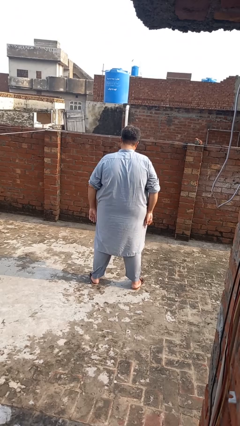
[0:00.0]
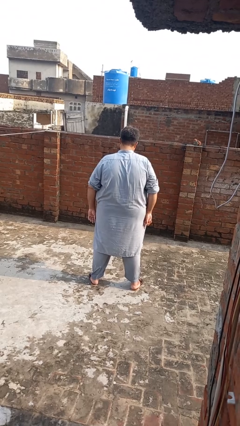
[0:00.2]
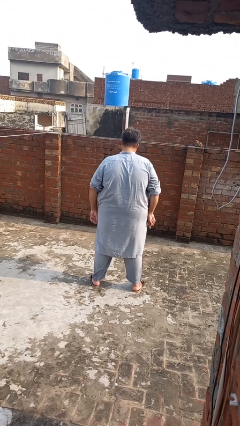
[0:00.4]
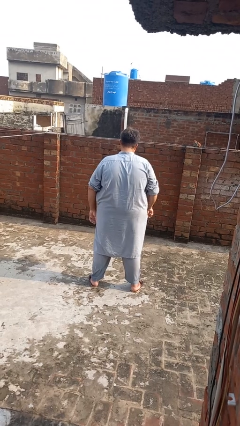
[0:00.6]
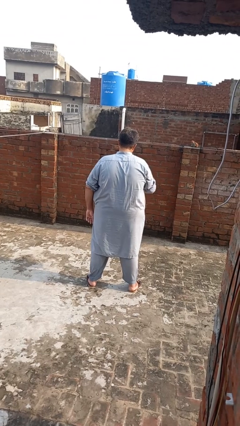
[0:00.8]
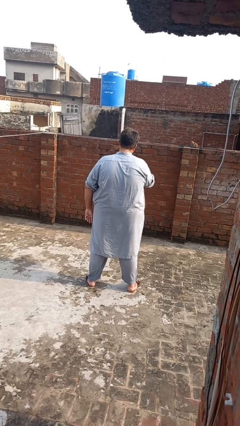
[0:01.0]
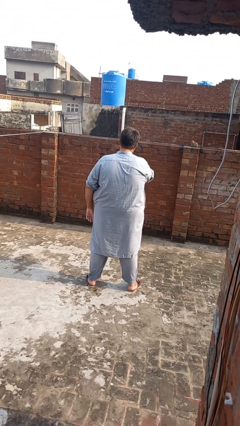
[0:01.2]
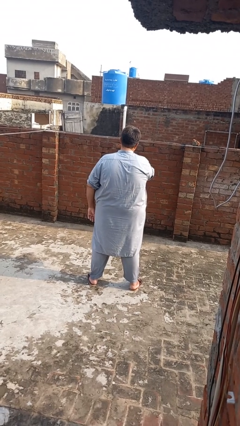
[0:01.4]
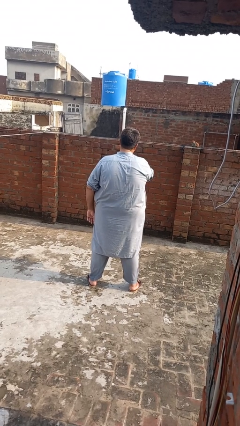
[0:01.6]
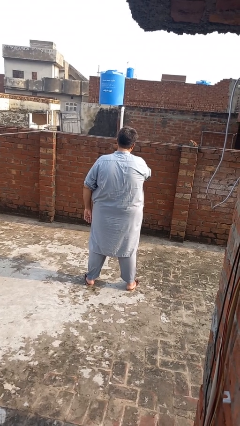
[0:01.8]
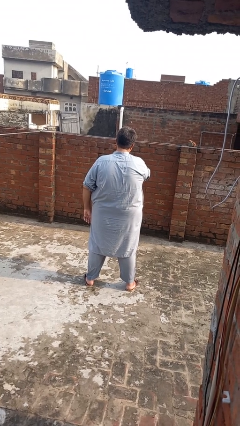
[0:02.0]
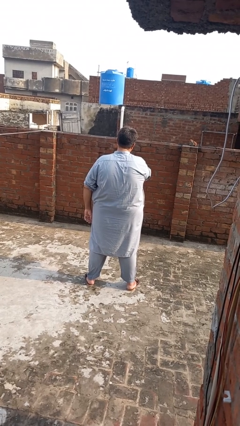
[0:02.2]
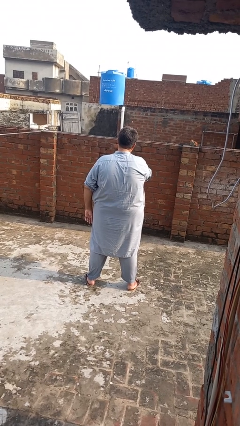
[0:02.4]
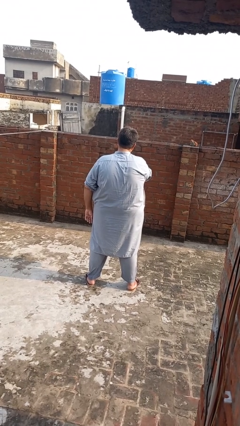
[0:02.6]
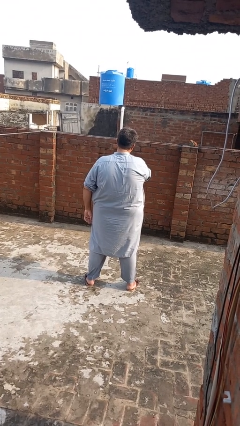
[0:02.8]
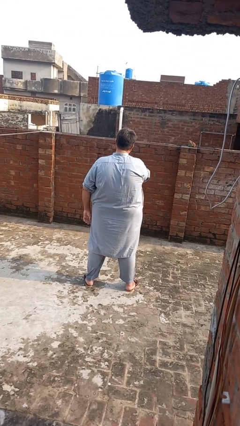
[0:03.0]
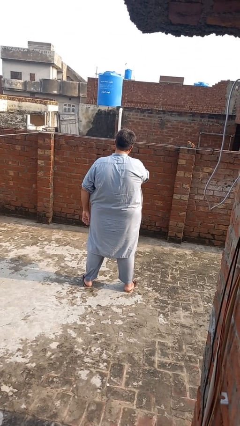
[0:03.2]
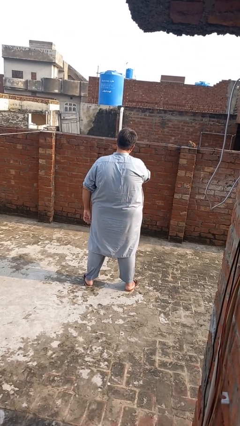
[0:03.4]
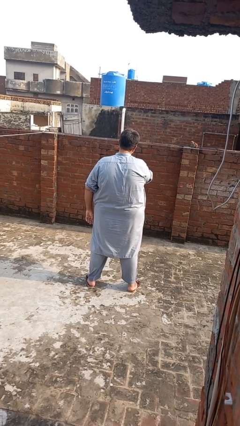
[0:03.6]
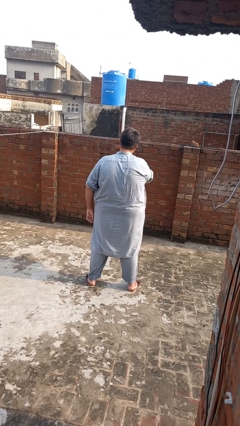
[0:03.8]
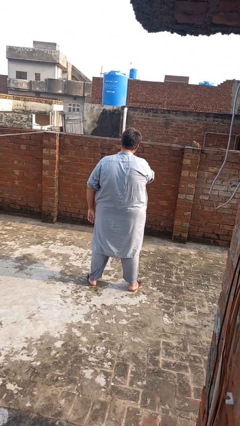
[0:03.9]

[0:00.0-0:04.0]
person gestures be quiet

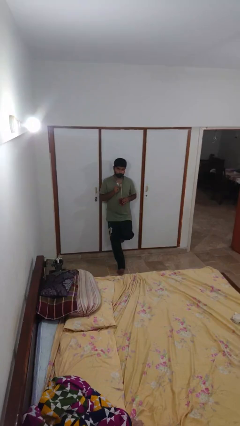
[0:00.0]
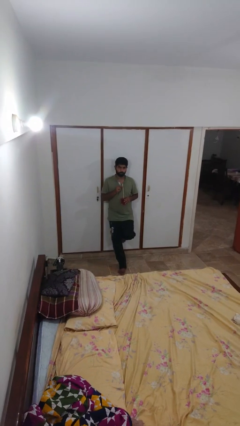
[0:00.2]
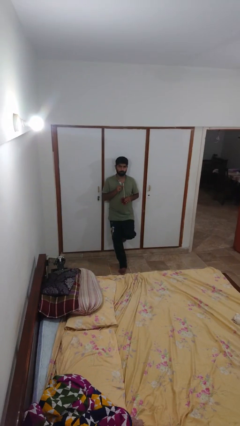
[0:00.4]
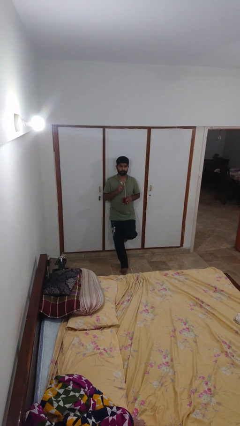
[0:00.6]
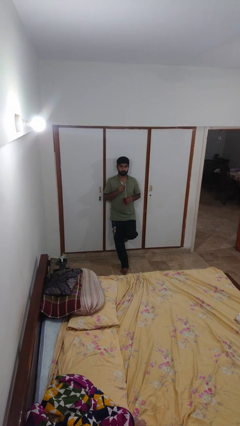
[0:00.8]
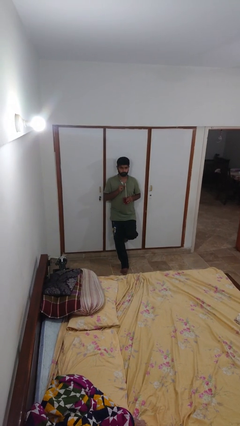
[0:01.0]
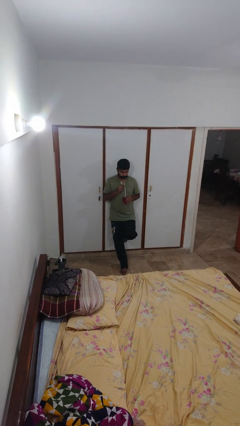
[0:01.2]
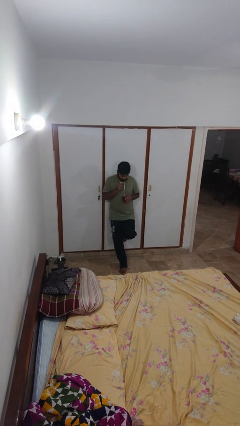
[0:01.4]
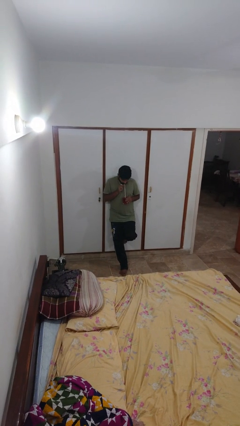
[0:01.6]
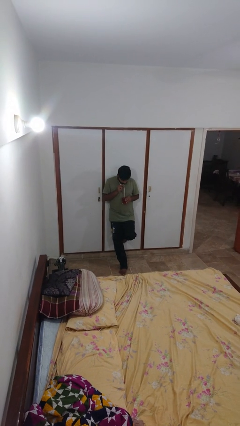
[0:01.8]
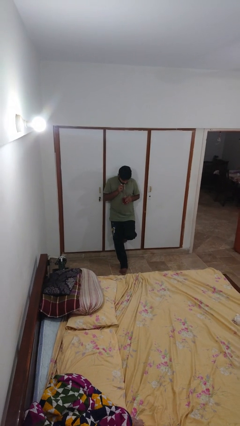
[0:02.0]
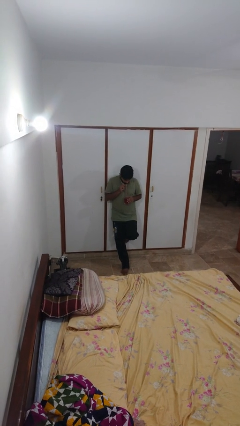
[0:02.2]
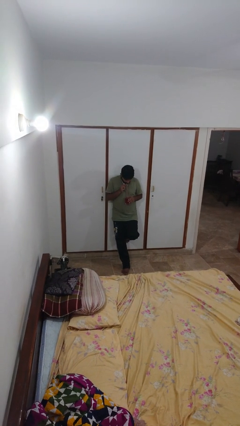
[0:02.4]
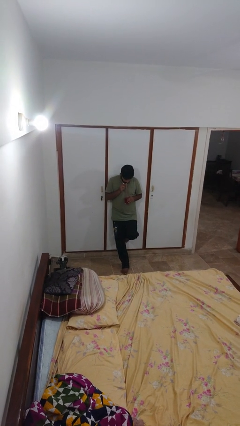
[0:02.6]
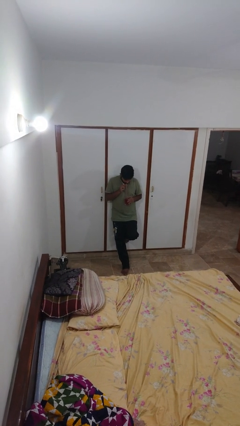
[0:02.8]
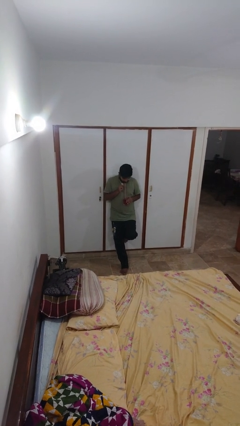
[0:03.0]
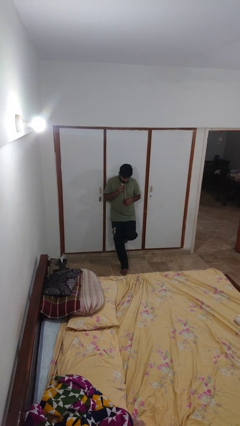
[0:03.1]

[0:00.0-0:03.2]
person drinks from straw

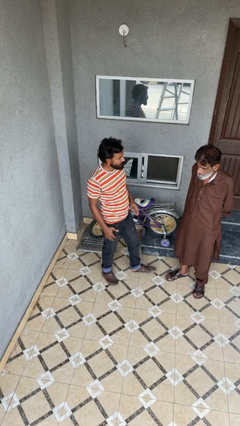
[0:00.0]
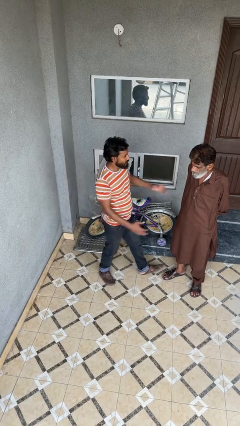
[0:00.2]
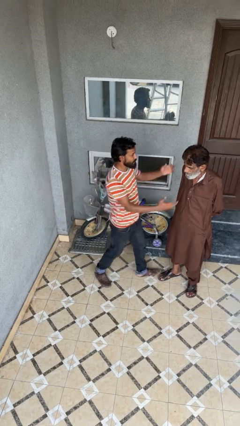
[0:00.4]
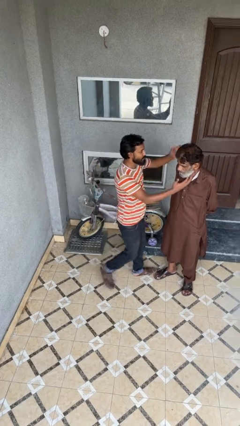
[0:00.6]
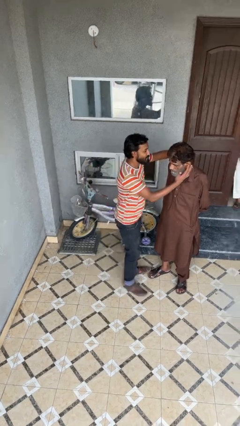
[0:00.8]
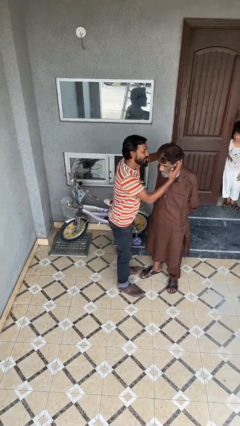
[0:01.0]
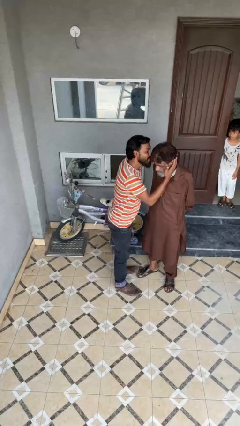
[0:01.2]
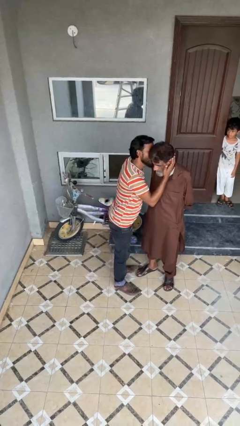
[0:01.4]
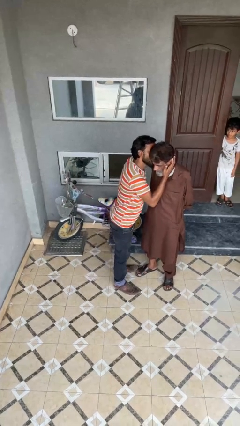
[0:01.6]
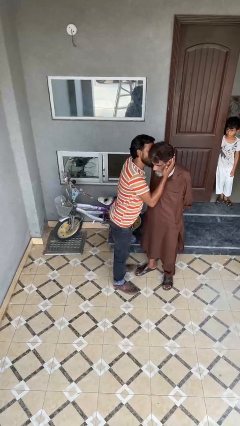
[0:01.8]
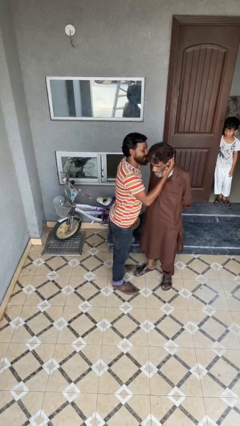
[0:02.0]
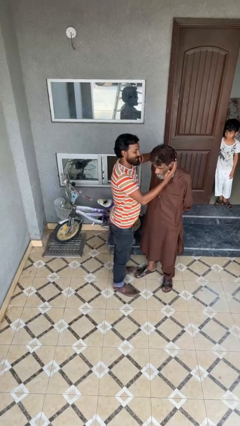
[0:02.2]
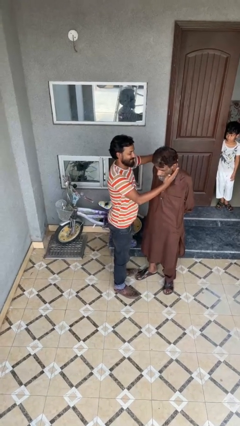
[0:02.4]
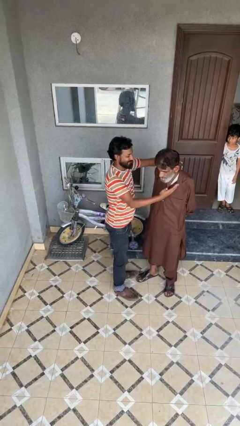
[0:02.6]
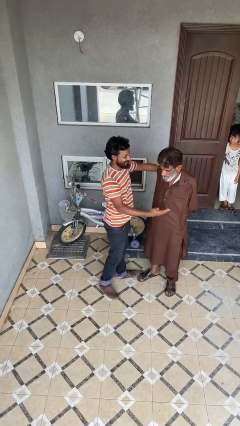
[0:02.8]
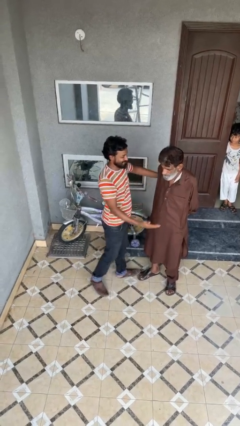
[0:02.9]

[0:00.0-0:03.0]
person kisses cheek of person

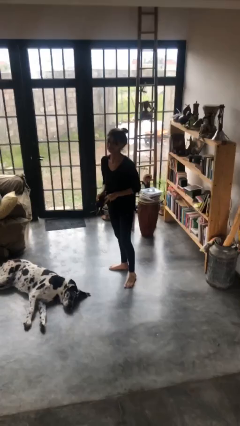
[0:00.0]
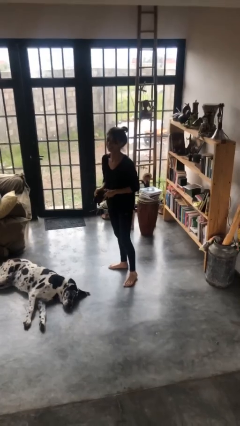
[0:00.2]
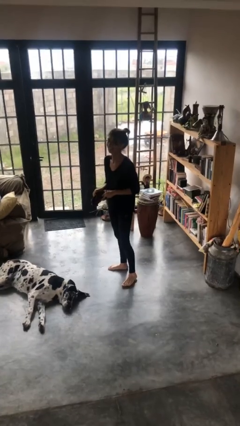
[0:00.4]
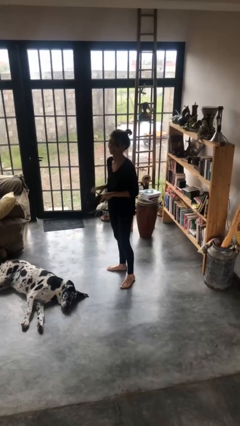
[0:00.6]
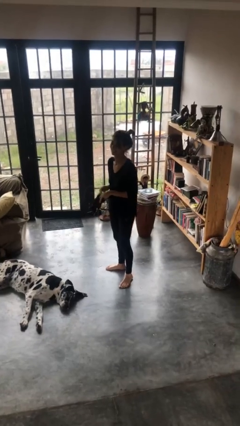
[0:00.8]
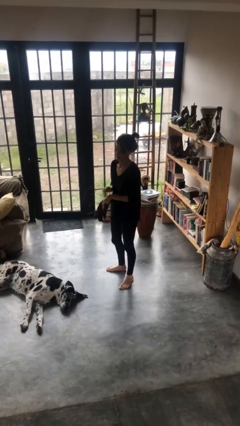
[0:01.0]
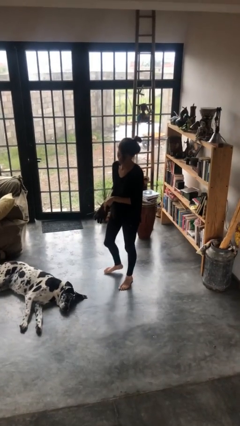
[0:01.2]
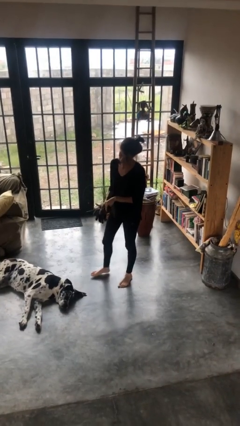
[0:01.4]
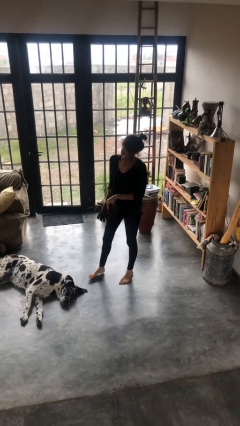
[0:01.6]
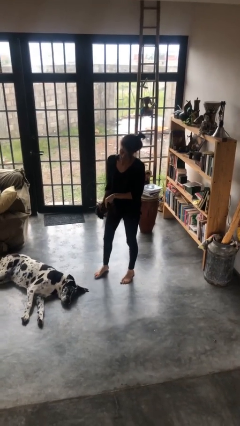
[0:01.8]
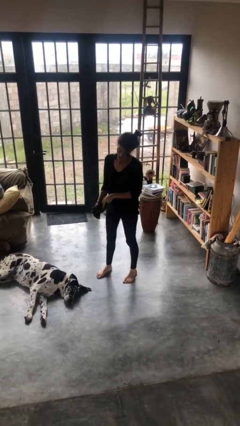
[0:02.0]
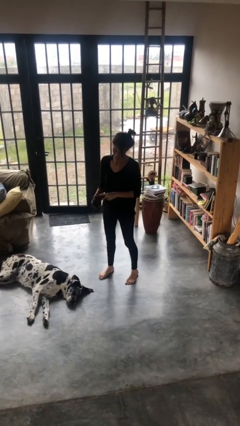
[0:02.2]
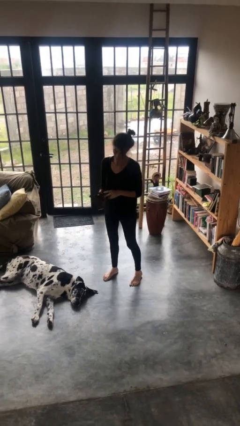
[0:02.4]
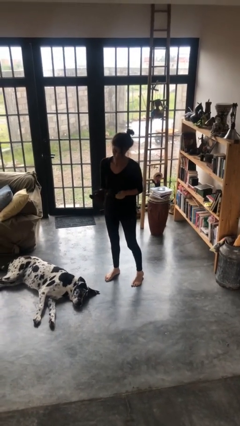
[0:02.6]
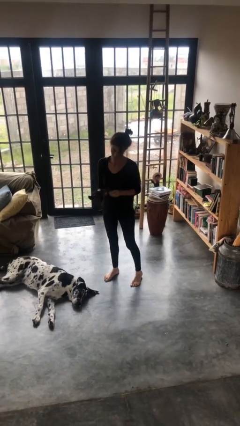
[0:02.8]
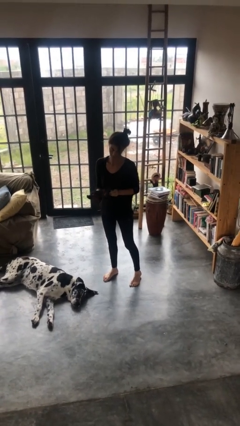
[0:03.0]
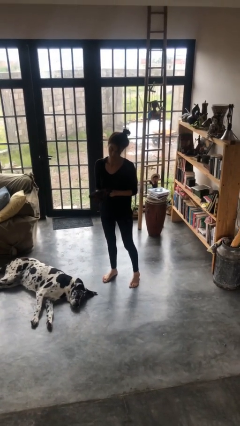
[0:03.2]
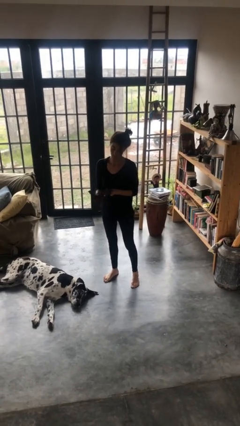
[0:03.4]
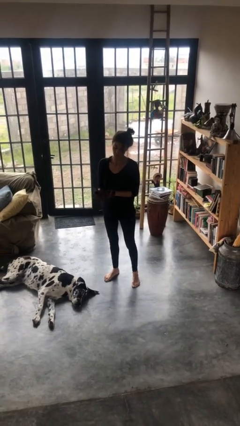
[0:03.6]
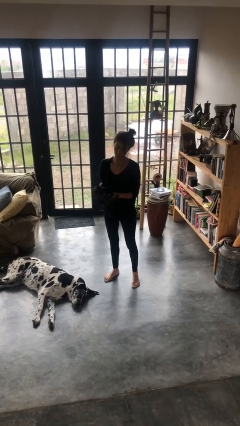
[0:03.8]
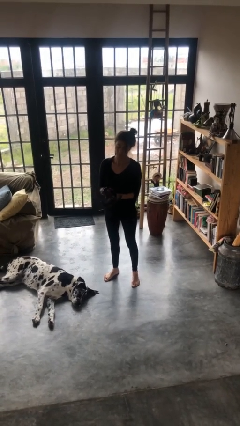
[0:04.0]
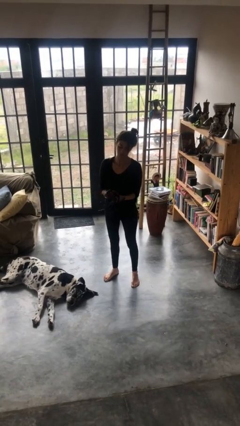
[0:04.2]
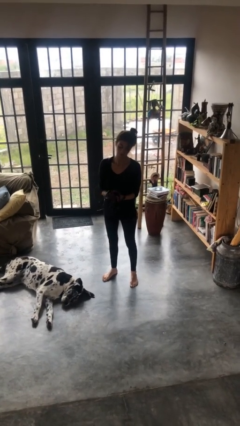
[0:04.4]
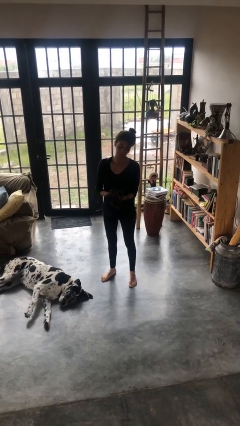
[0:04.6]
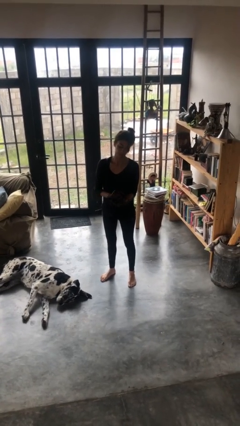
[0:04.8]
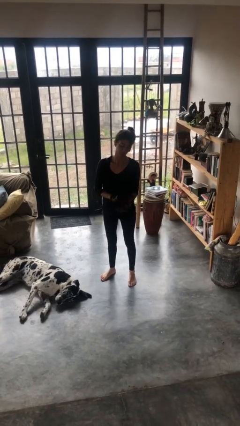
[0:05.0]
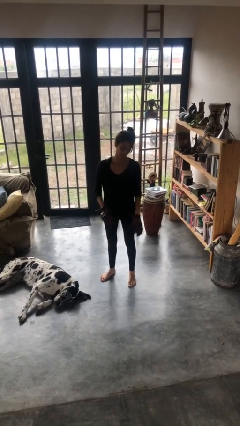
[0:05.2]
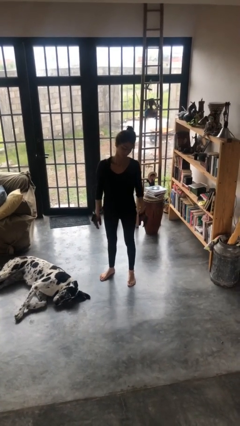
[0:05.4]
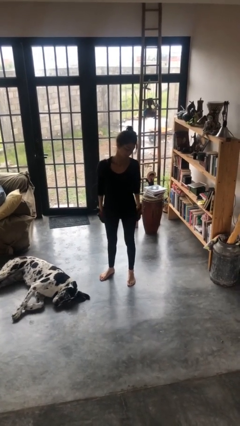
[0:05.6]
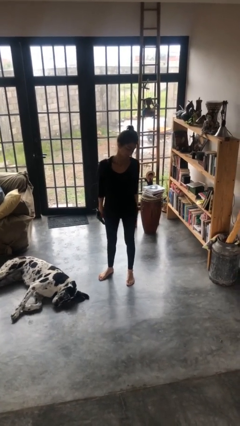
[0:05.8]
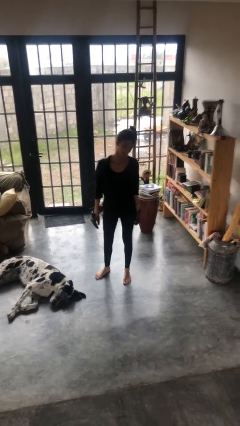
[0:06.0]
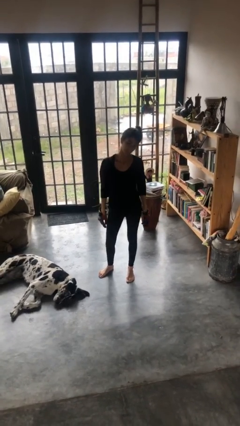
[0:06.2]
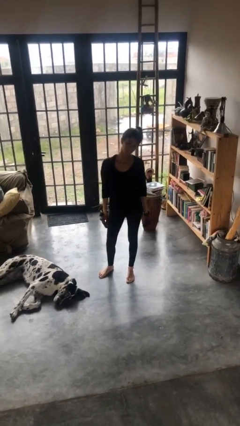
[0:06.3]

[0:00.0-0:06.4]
person puts on gloves

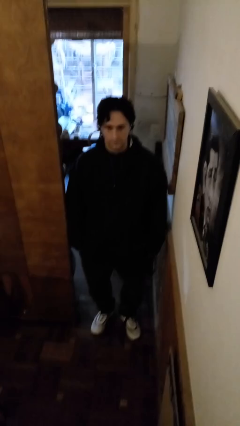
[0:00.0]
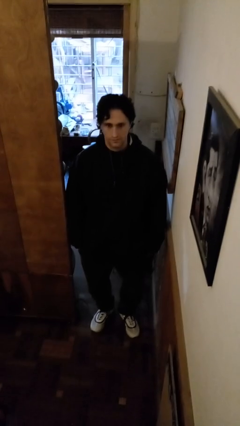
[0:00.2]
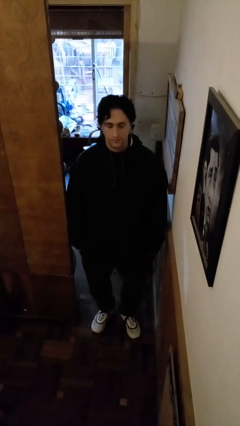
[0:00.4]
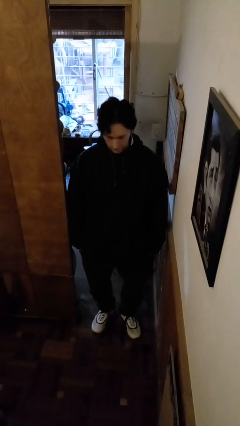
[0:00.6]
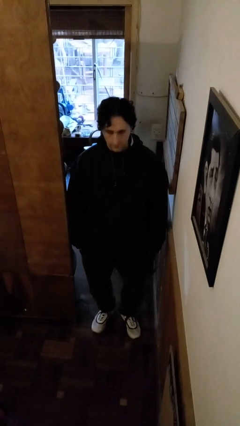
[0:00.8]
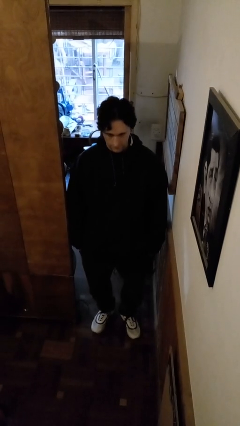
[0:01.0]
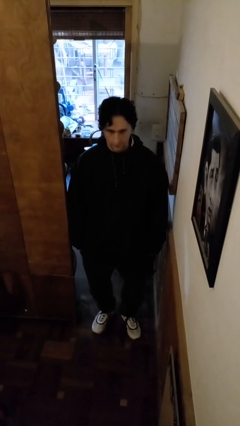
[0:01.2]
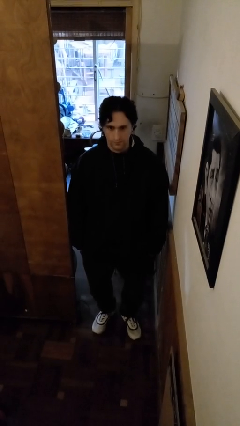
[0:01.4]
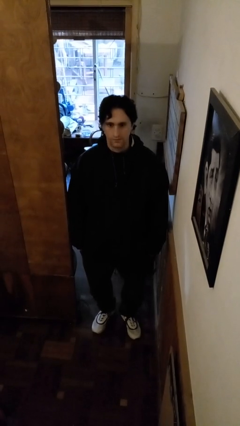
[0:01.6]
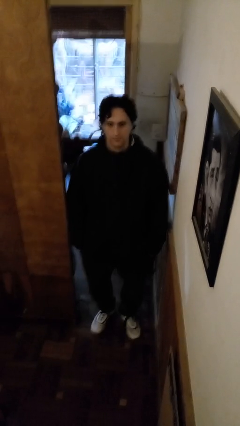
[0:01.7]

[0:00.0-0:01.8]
person nods head
